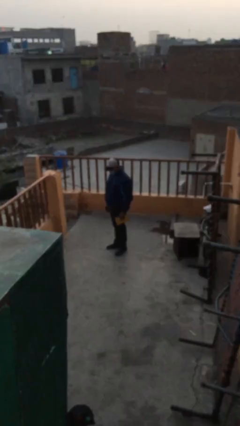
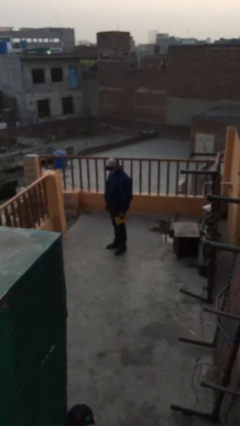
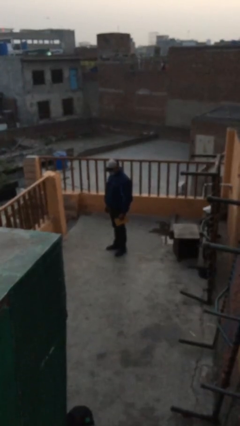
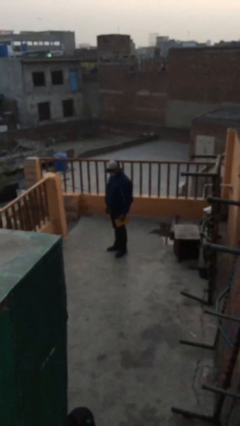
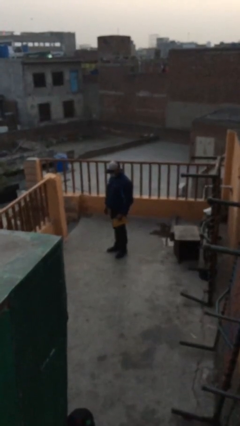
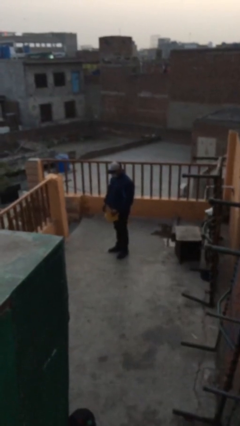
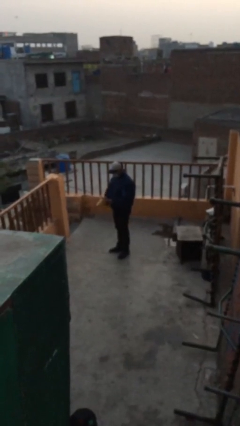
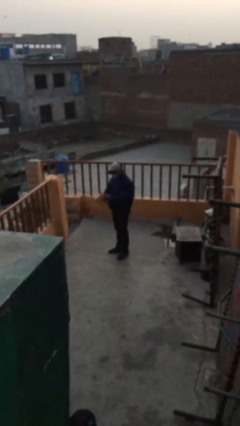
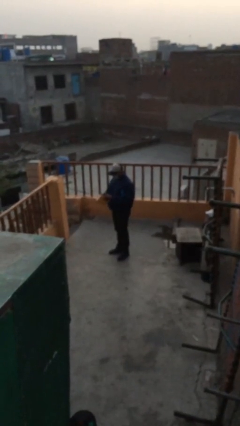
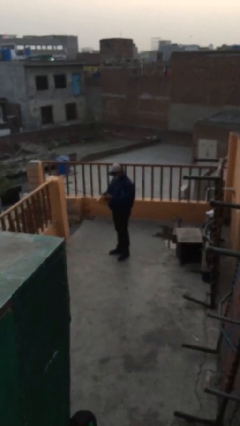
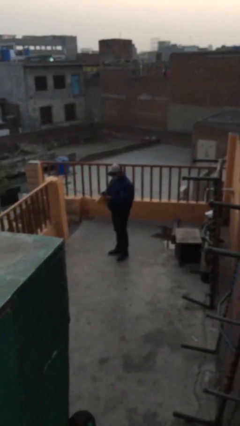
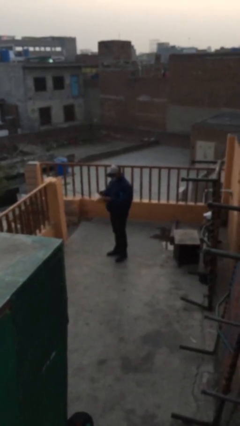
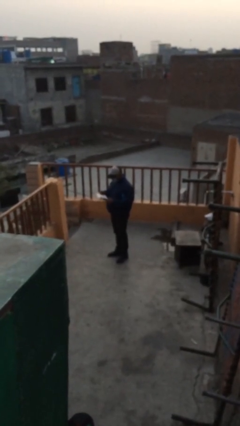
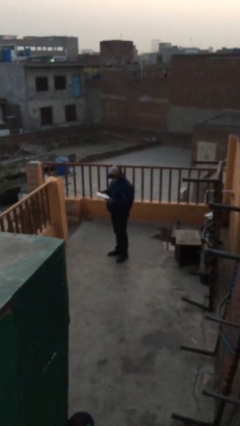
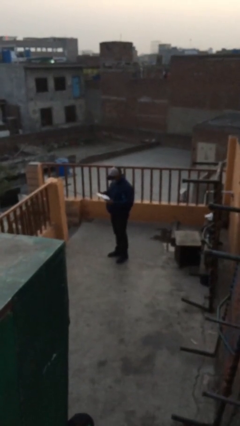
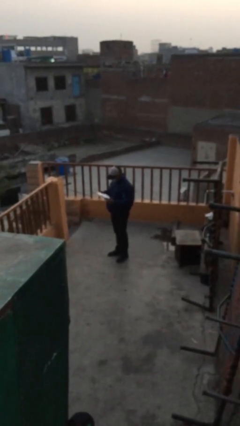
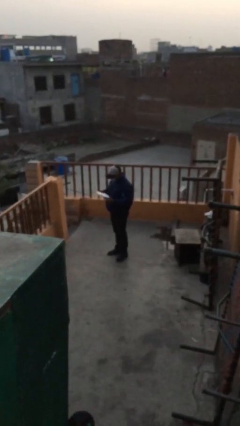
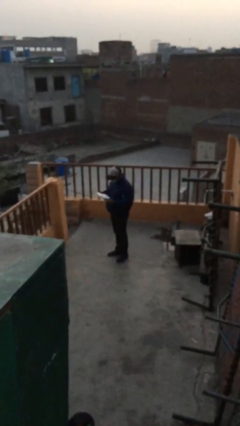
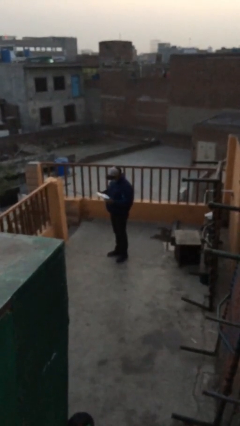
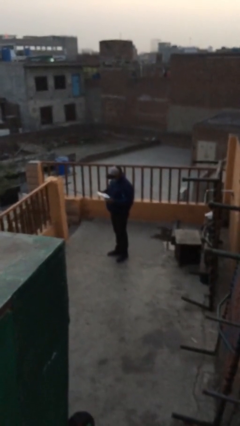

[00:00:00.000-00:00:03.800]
person reads document

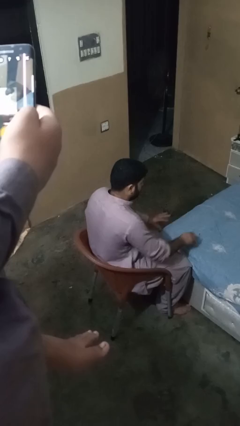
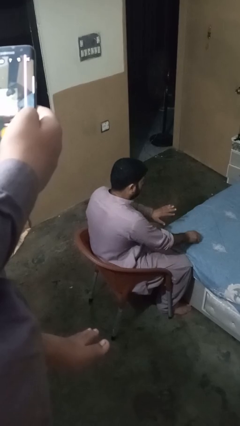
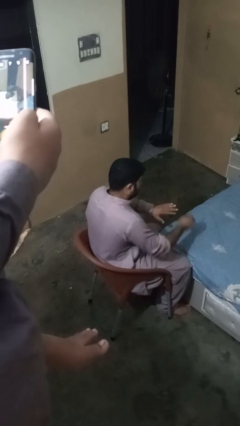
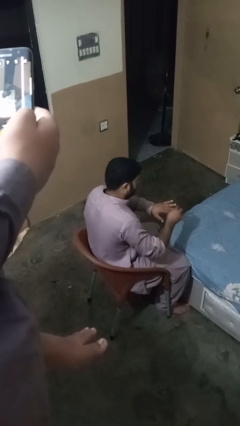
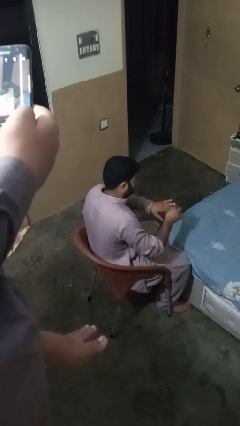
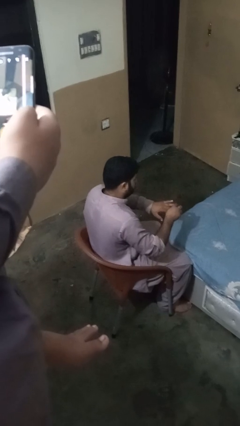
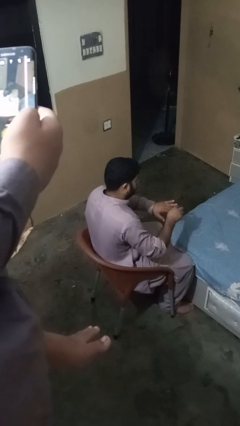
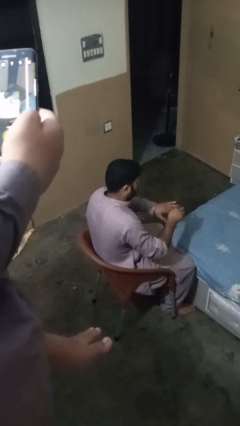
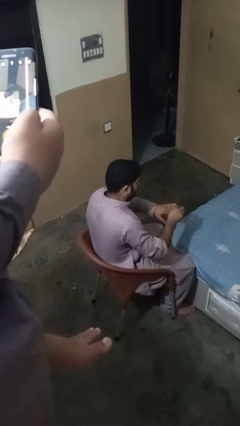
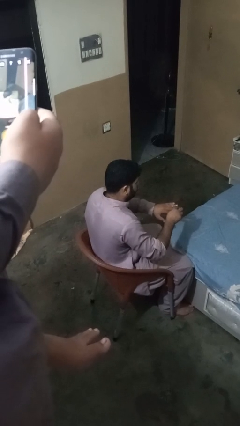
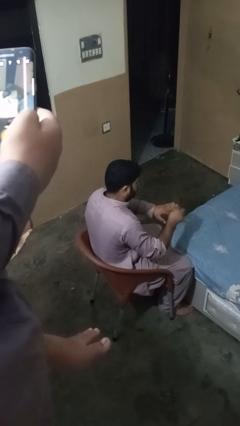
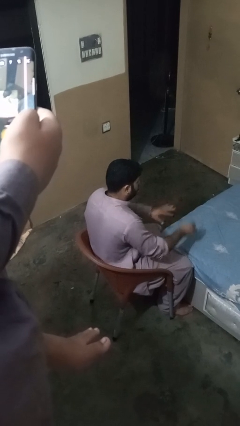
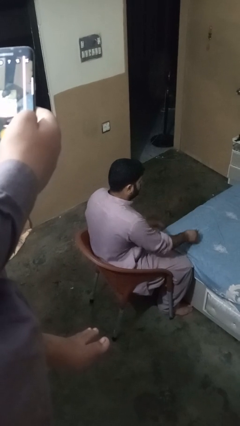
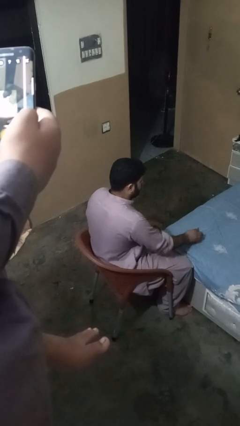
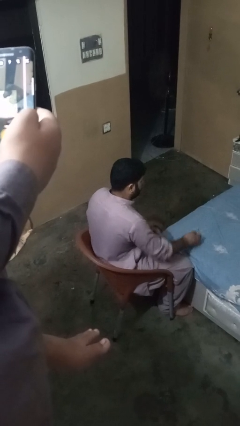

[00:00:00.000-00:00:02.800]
person files fingernails

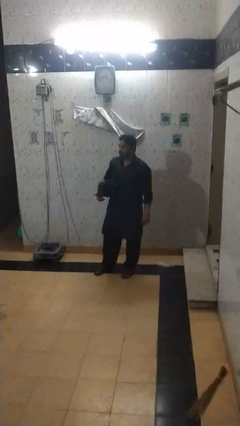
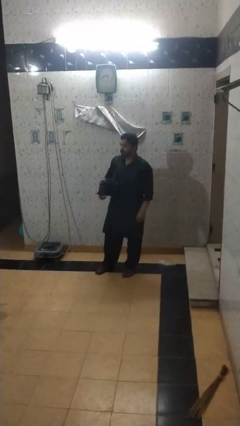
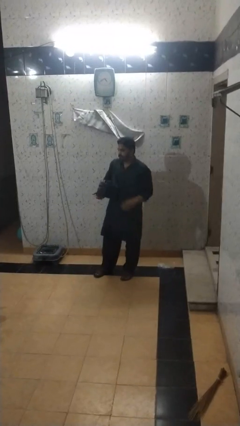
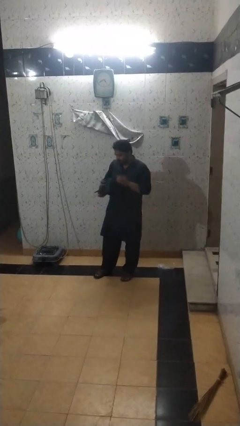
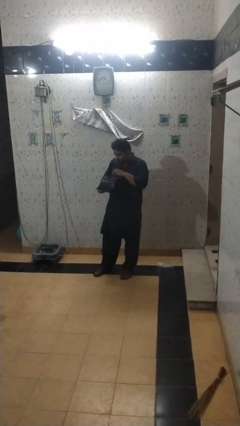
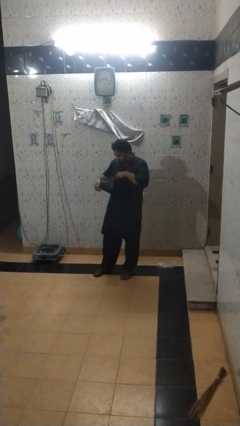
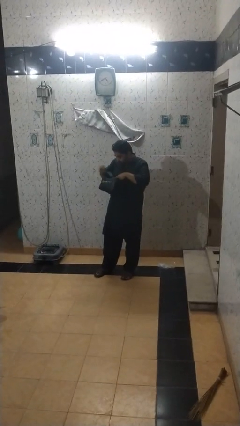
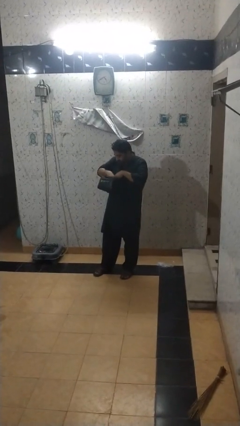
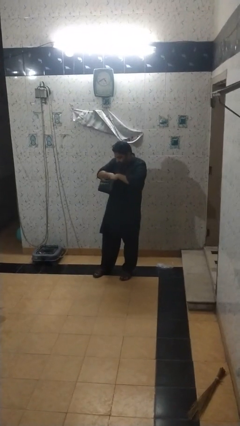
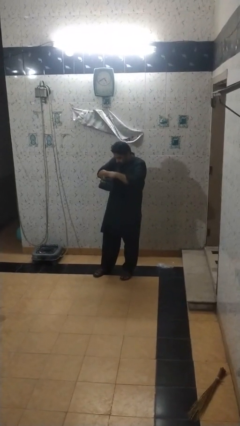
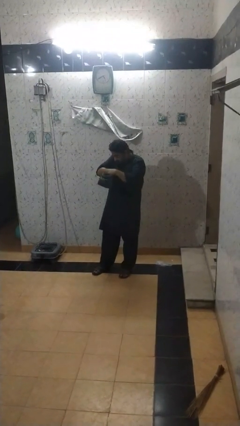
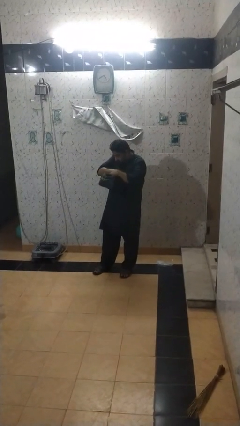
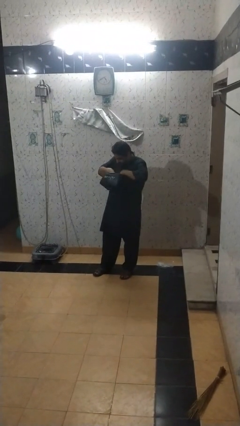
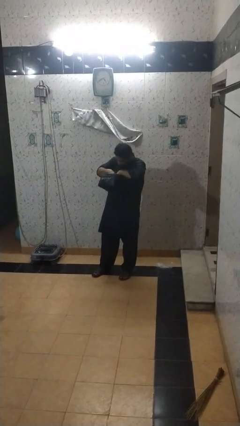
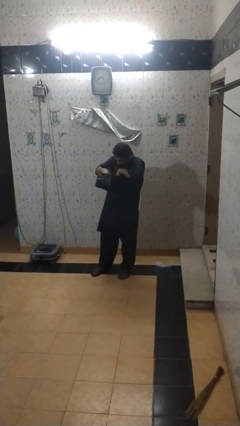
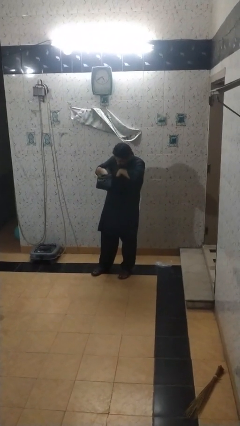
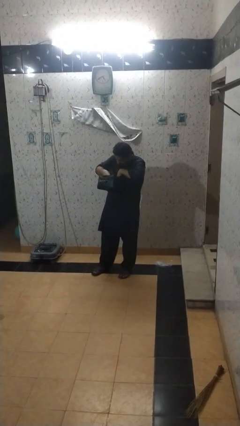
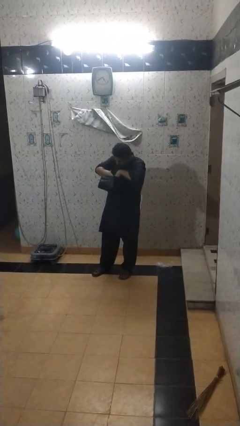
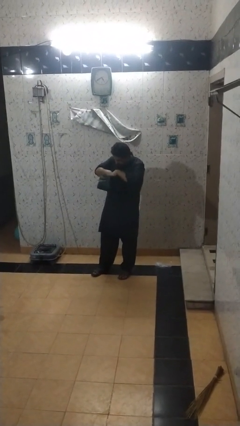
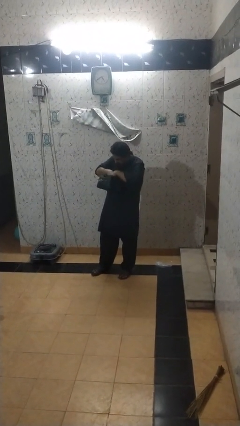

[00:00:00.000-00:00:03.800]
person searches in backpack

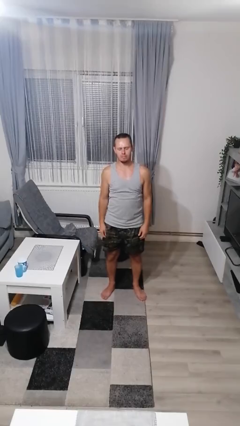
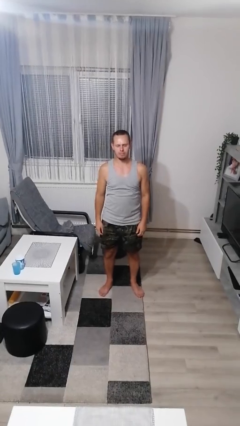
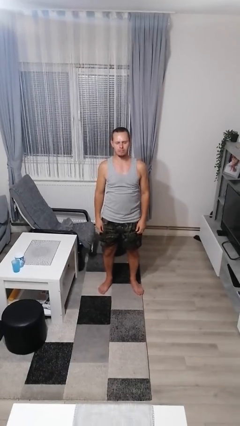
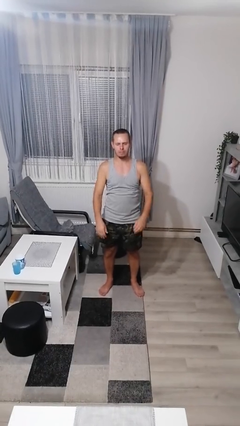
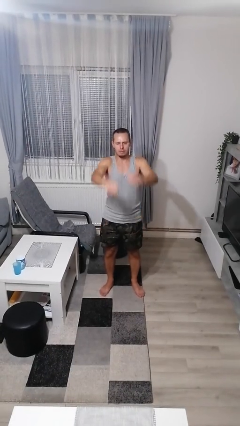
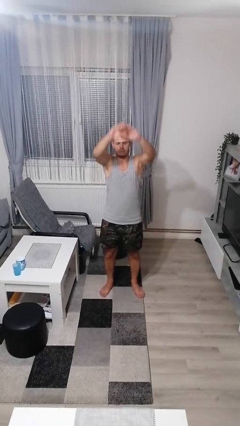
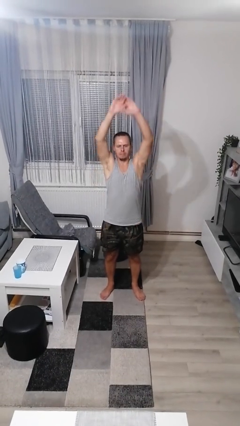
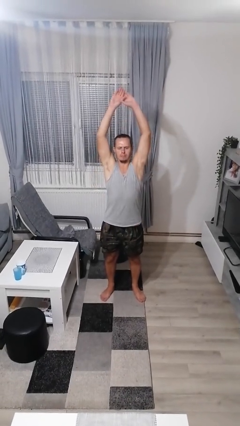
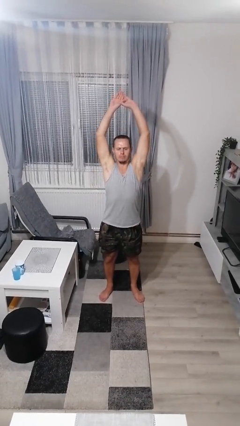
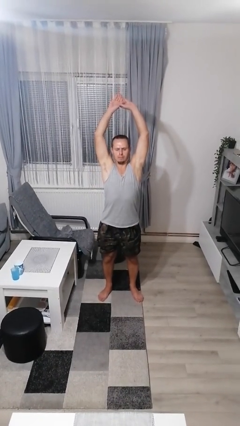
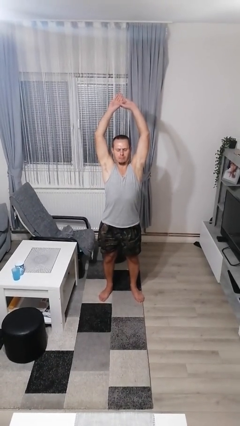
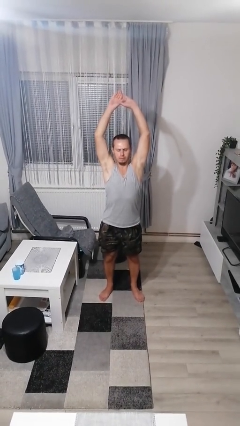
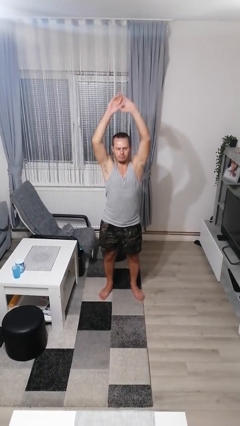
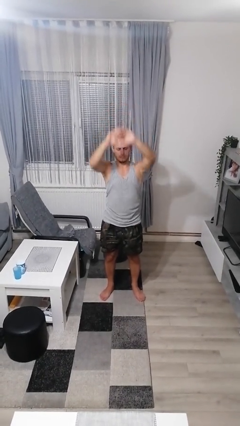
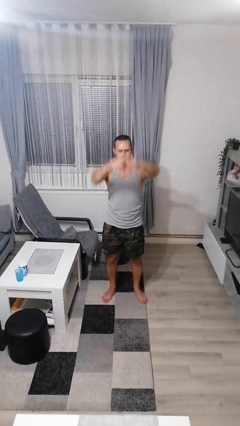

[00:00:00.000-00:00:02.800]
person stretches arms over head

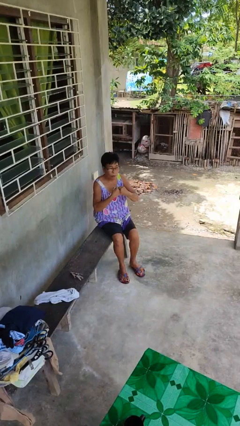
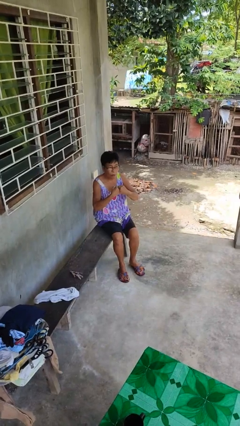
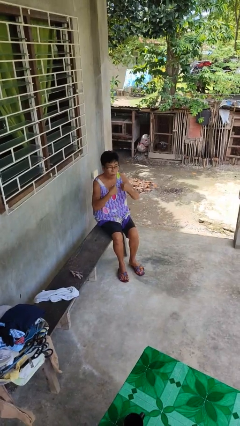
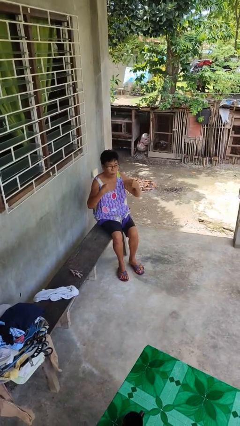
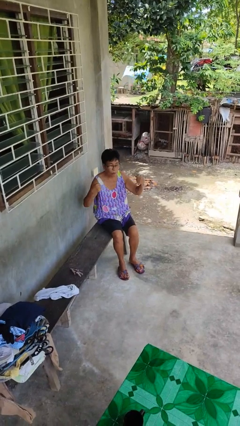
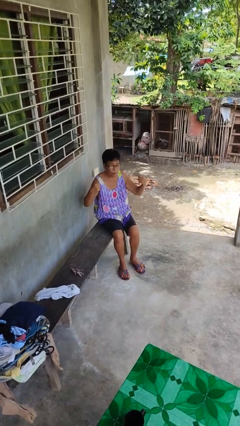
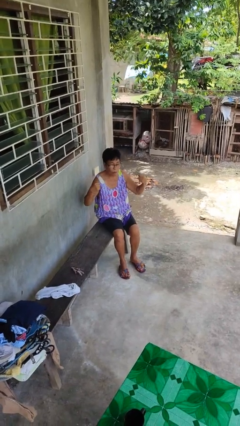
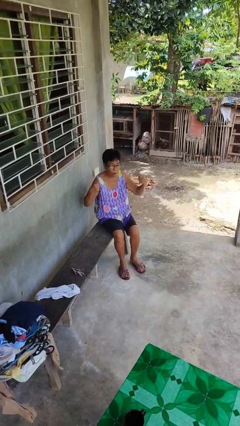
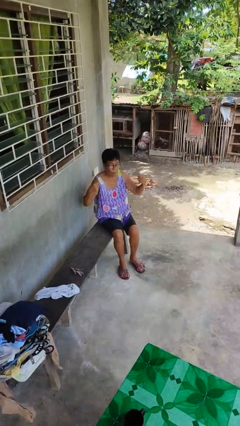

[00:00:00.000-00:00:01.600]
person gestures zoom in

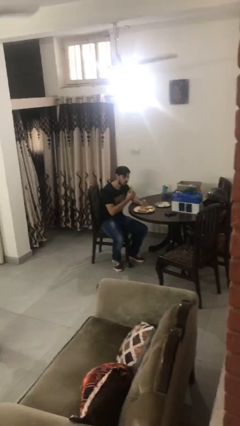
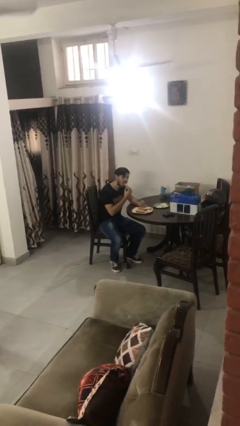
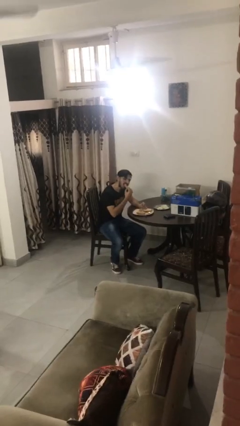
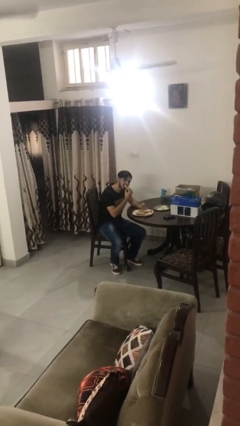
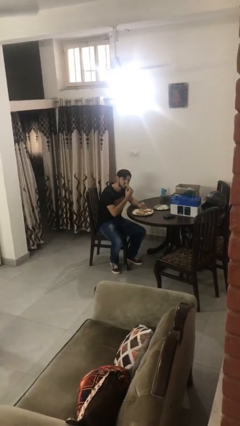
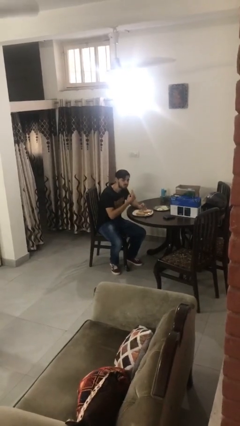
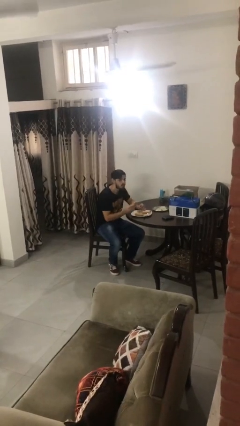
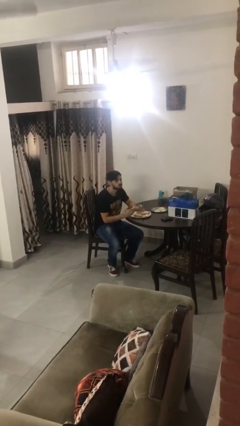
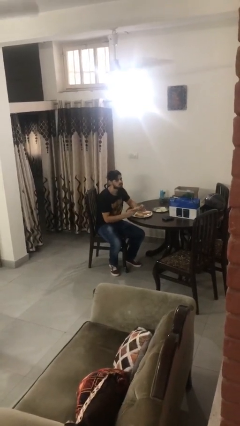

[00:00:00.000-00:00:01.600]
person eats with hands

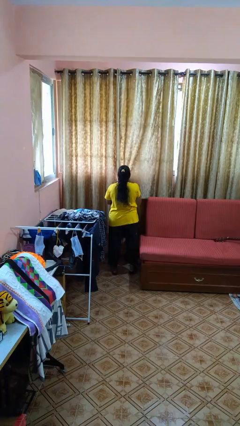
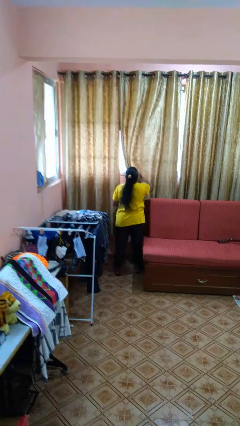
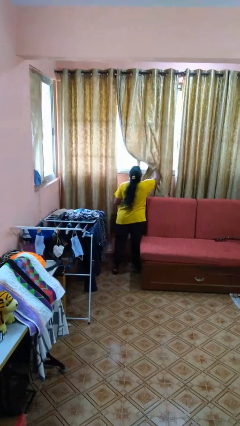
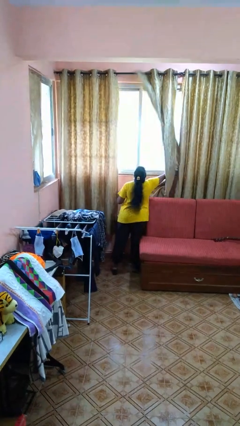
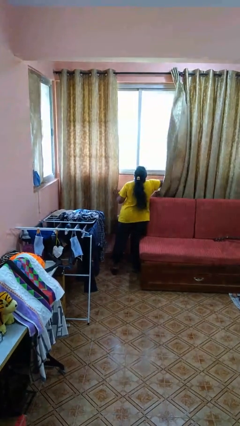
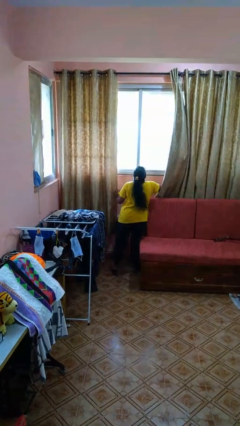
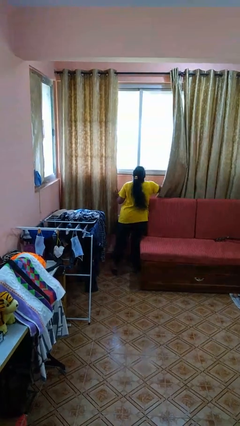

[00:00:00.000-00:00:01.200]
person opens curtains
